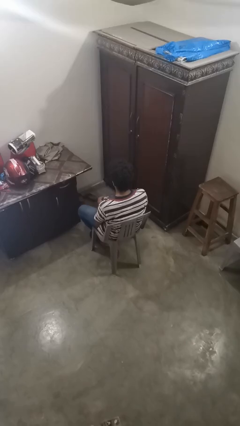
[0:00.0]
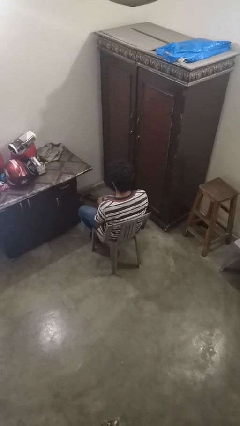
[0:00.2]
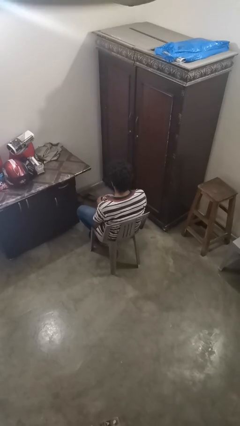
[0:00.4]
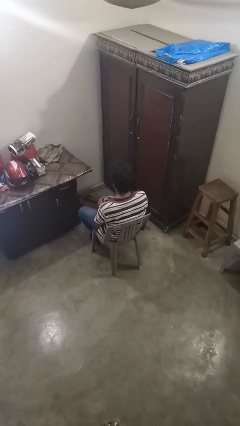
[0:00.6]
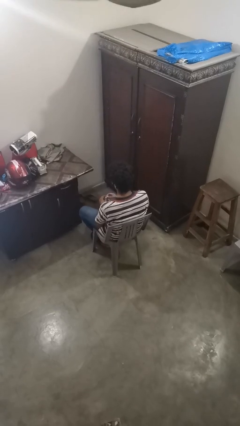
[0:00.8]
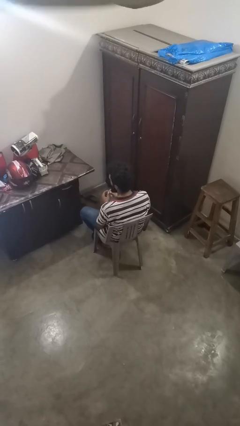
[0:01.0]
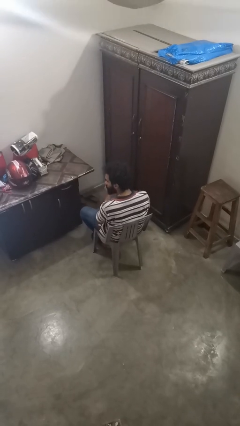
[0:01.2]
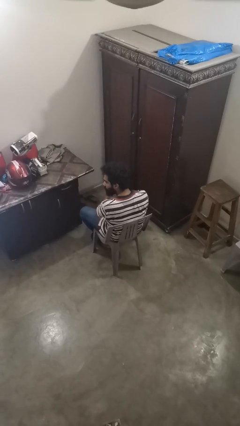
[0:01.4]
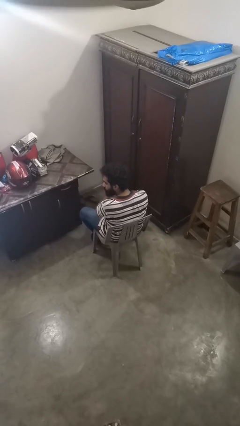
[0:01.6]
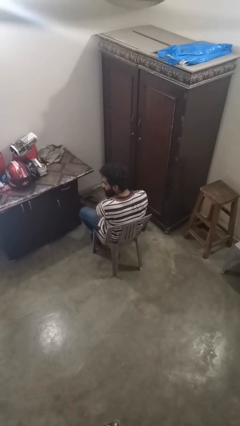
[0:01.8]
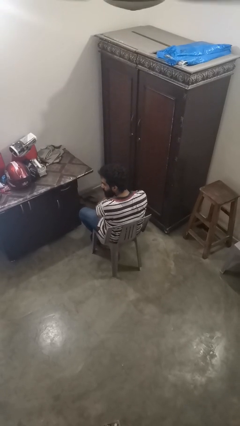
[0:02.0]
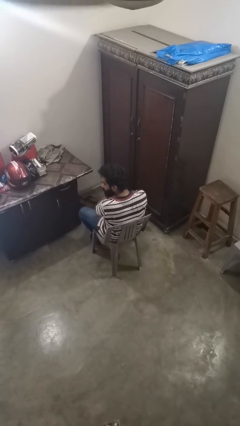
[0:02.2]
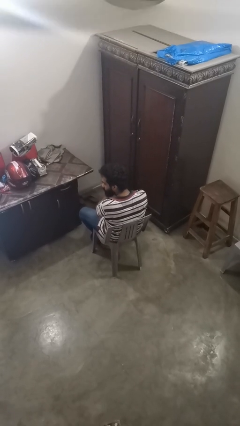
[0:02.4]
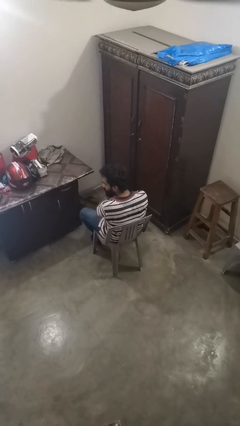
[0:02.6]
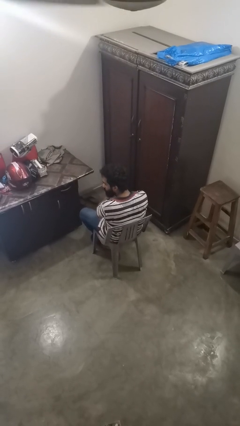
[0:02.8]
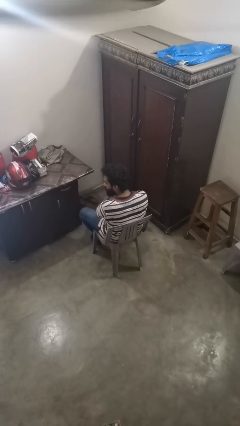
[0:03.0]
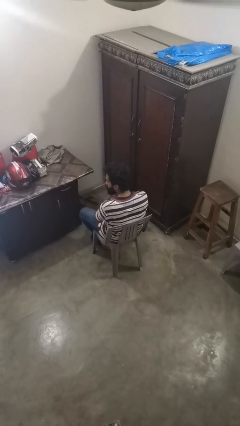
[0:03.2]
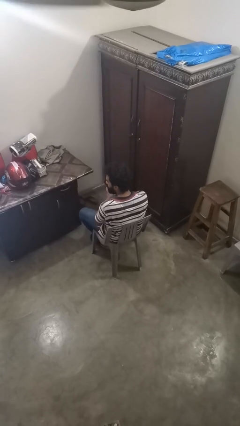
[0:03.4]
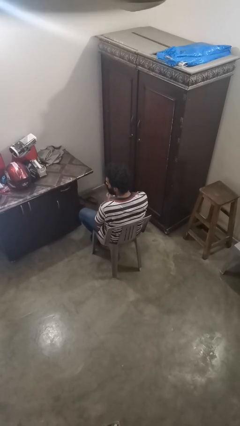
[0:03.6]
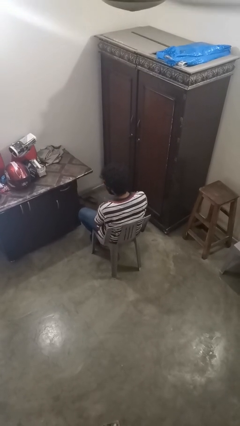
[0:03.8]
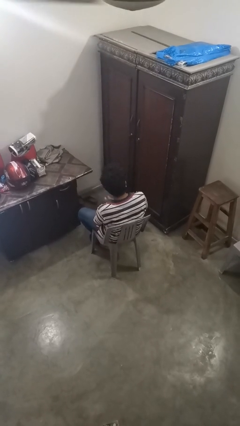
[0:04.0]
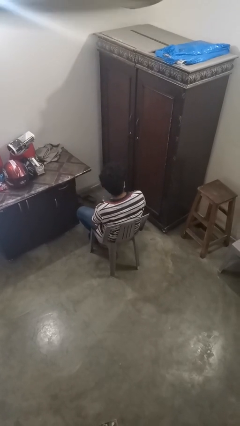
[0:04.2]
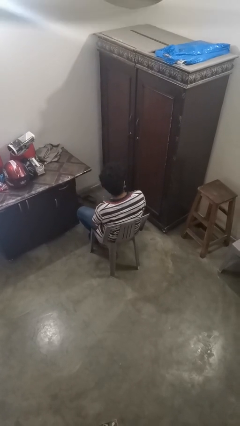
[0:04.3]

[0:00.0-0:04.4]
person puts on earrings

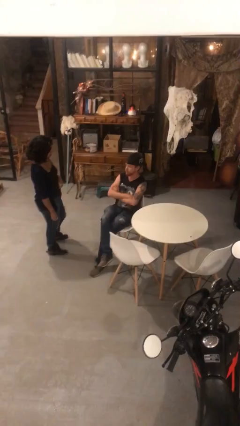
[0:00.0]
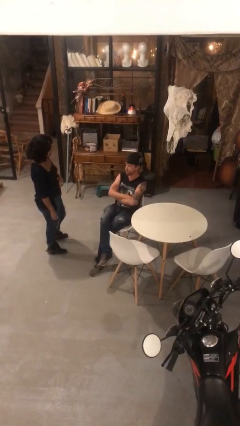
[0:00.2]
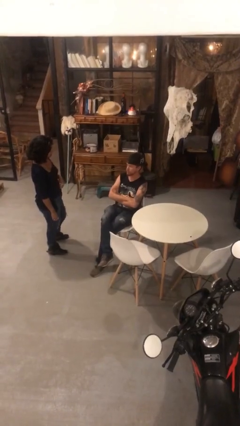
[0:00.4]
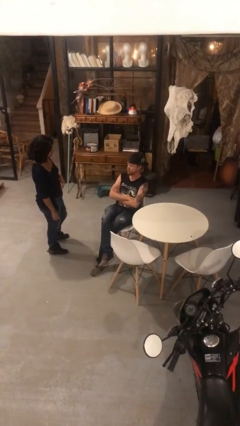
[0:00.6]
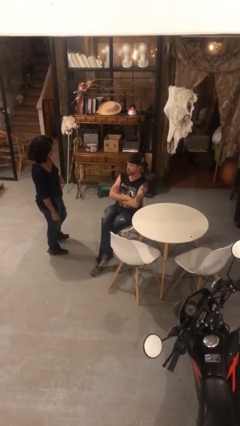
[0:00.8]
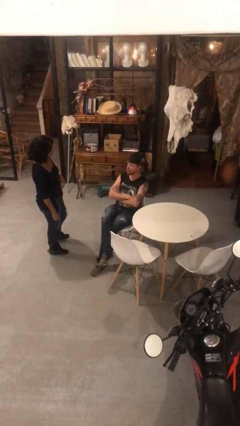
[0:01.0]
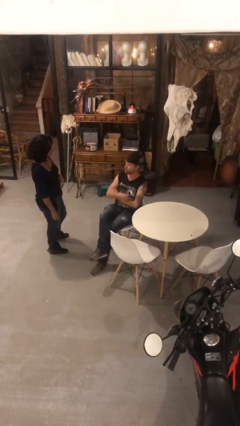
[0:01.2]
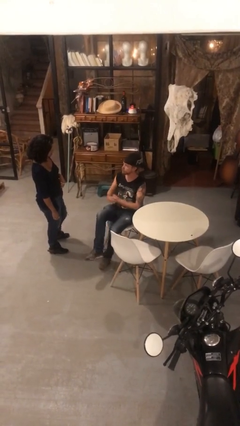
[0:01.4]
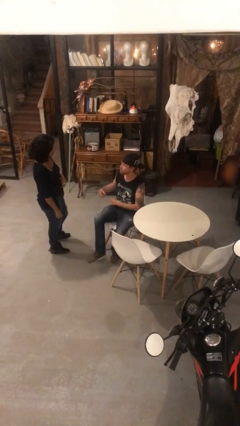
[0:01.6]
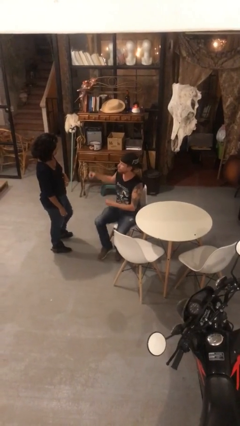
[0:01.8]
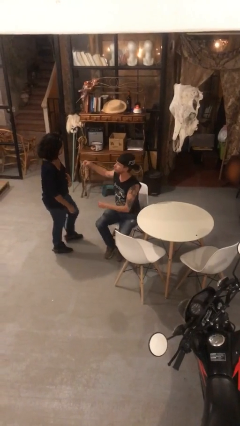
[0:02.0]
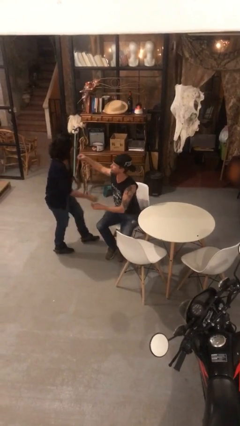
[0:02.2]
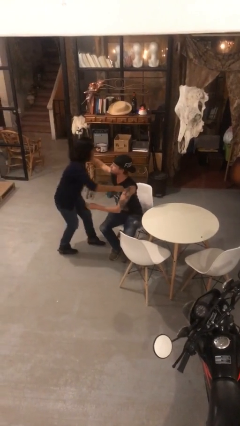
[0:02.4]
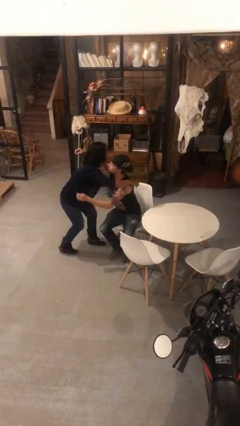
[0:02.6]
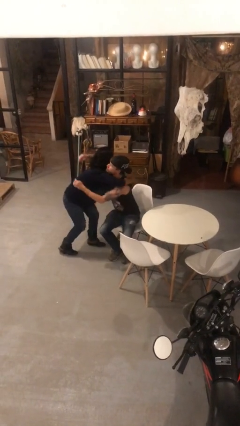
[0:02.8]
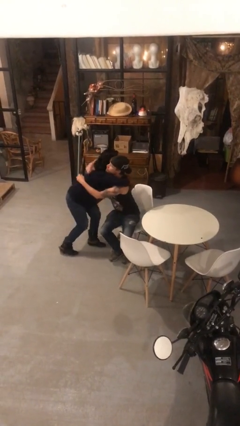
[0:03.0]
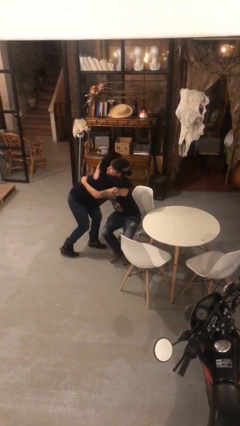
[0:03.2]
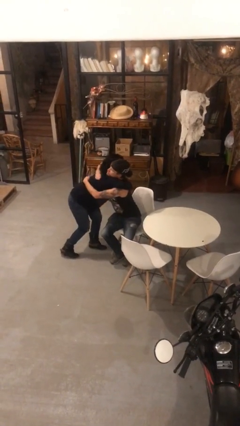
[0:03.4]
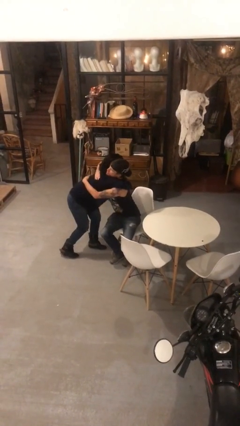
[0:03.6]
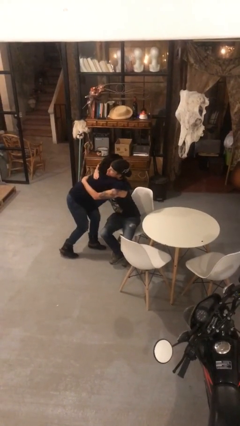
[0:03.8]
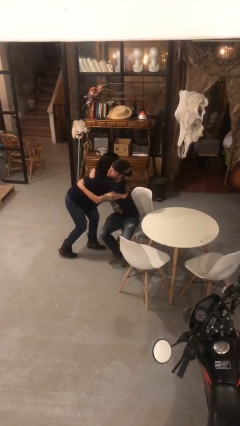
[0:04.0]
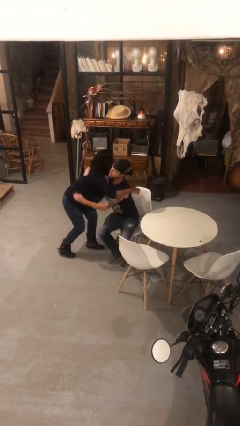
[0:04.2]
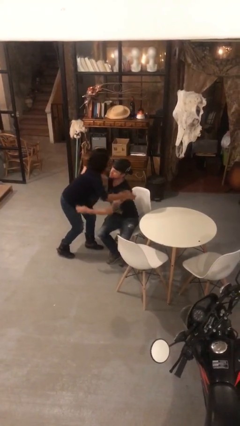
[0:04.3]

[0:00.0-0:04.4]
person embraces person

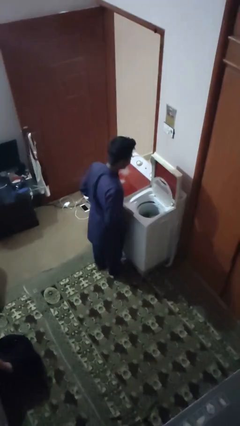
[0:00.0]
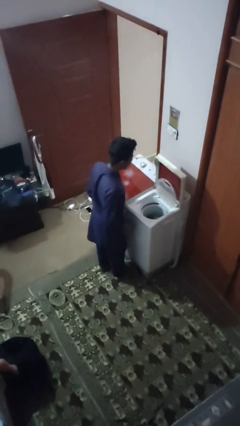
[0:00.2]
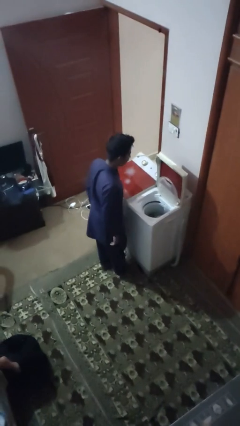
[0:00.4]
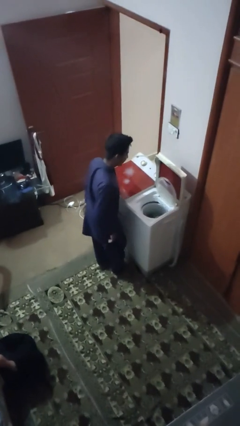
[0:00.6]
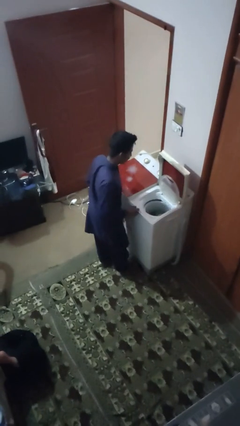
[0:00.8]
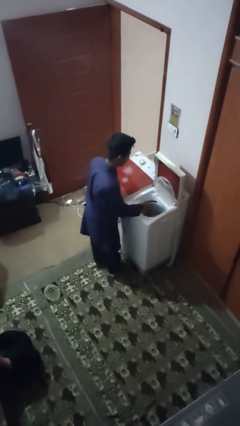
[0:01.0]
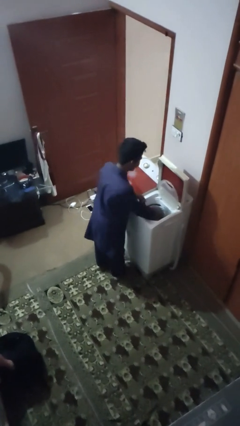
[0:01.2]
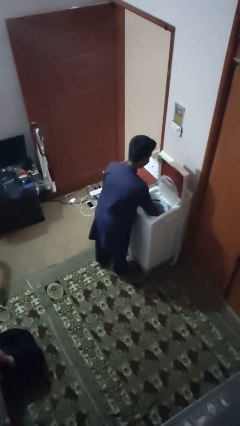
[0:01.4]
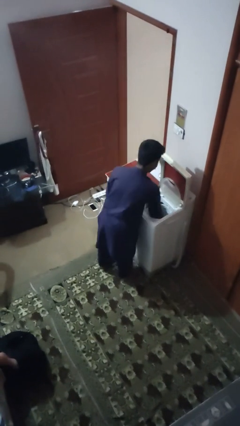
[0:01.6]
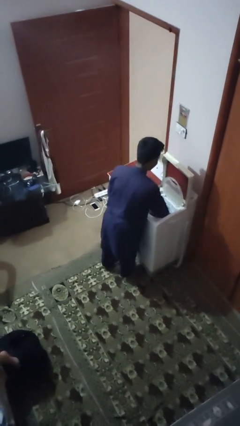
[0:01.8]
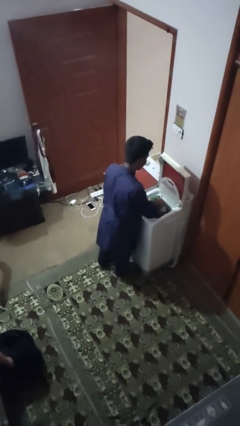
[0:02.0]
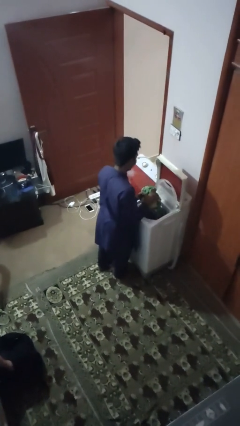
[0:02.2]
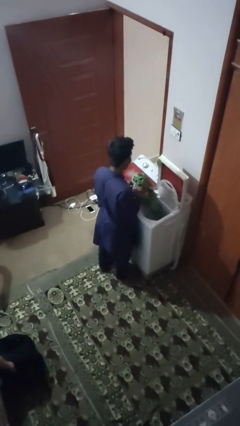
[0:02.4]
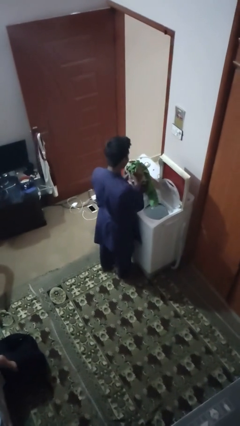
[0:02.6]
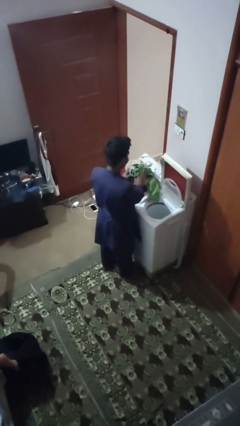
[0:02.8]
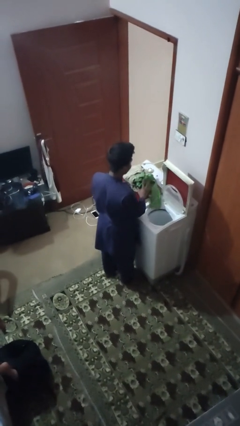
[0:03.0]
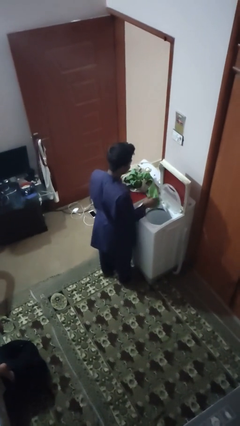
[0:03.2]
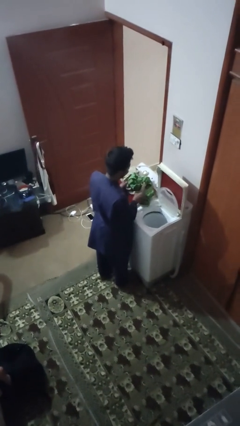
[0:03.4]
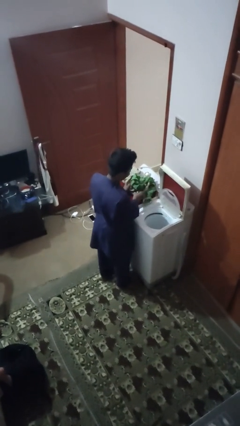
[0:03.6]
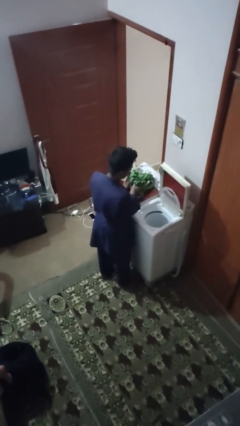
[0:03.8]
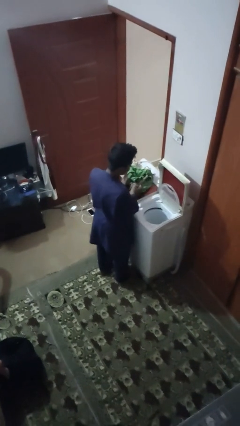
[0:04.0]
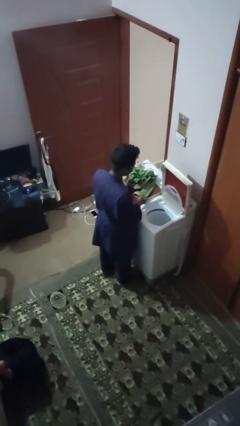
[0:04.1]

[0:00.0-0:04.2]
person unloads dryer

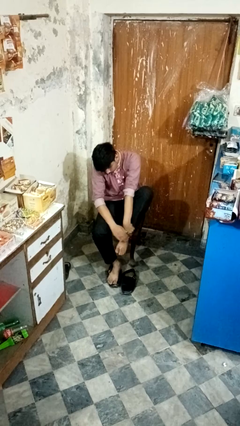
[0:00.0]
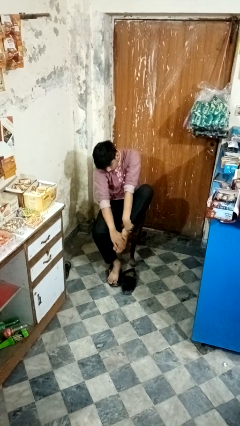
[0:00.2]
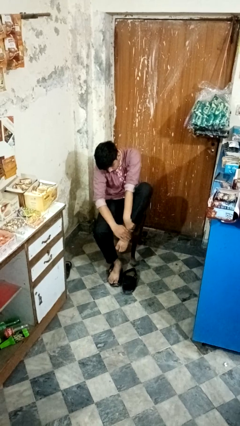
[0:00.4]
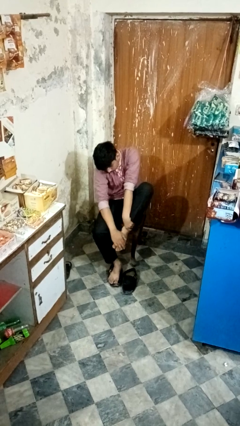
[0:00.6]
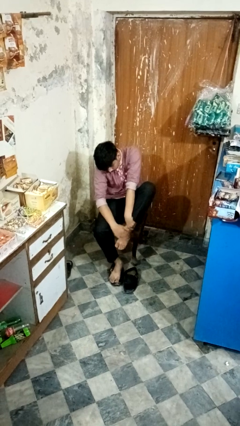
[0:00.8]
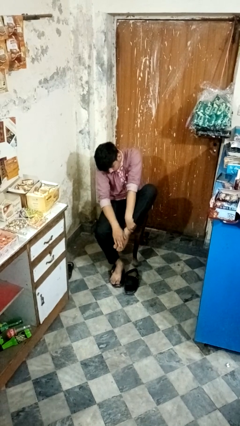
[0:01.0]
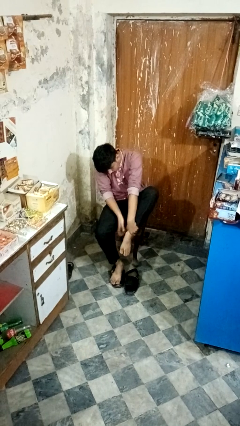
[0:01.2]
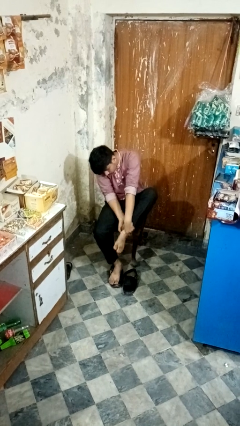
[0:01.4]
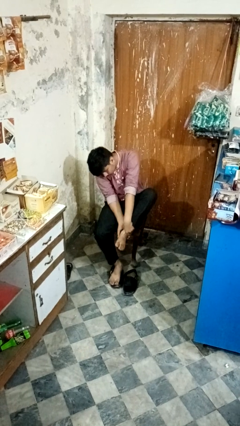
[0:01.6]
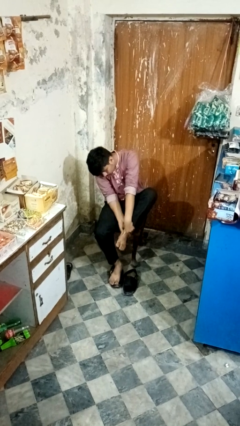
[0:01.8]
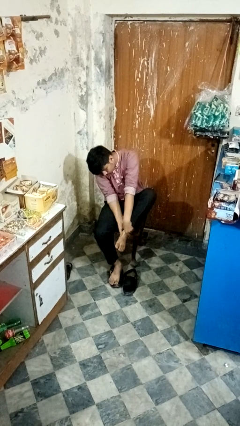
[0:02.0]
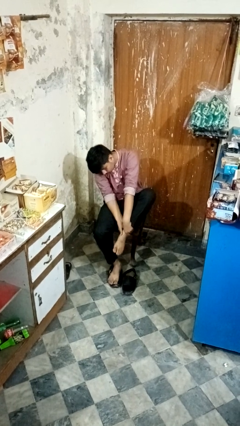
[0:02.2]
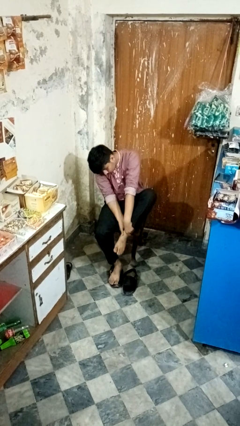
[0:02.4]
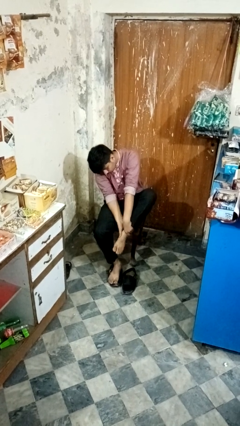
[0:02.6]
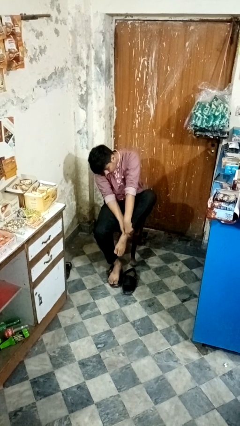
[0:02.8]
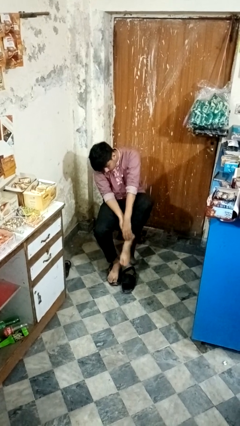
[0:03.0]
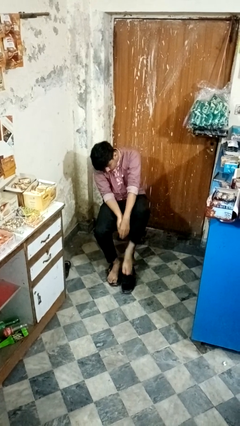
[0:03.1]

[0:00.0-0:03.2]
person rubs foot

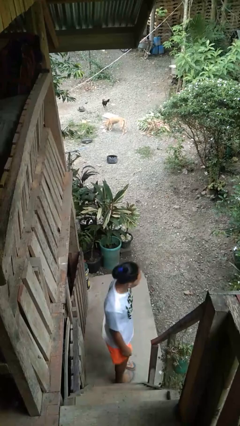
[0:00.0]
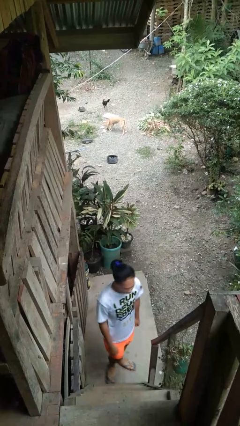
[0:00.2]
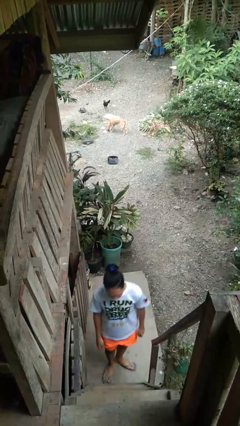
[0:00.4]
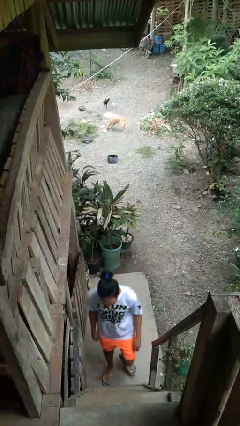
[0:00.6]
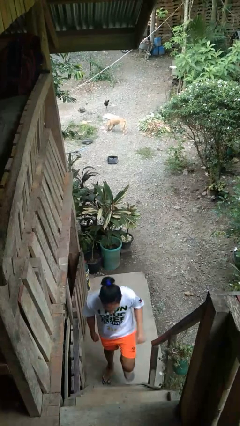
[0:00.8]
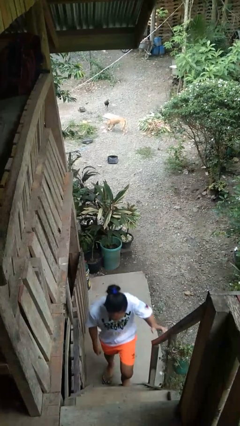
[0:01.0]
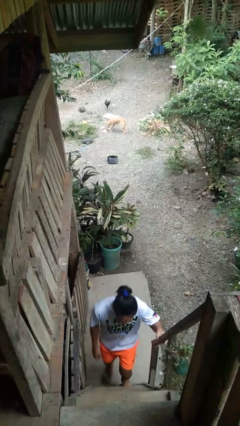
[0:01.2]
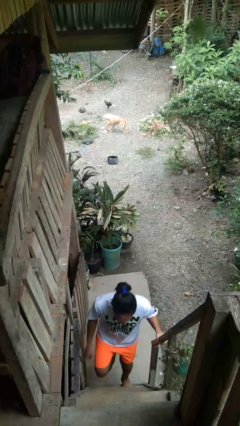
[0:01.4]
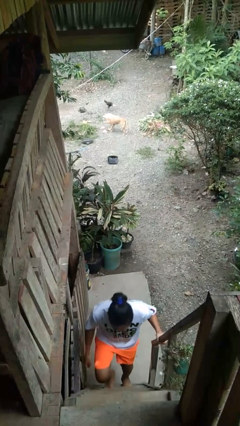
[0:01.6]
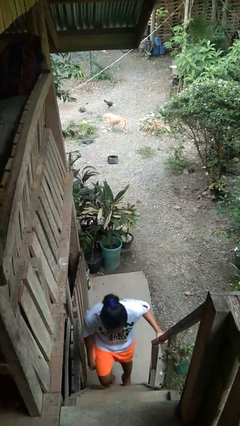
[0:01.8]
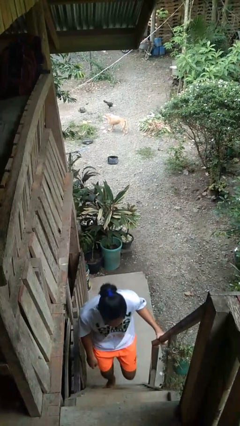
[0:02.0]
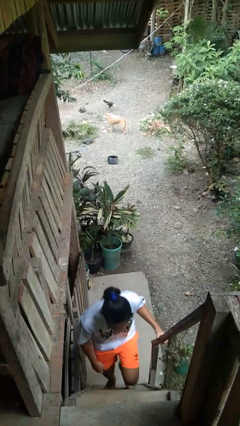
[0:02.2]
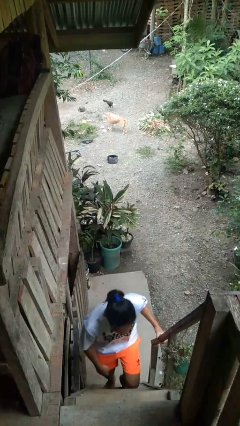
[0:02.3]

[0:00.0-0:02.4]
person climbs up stairs
